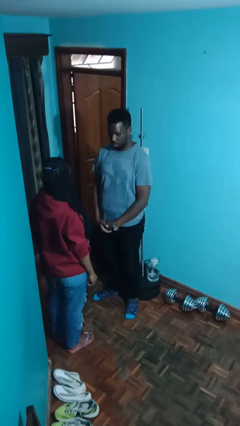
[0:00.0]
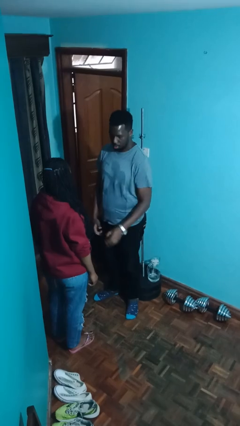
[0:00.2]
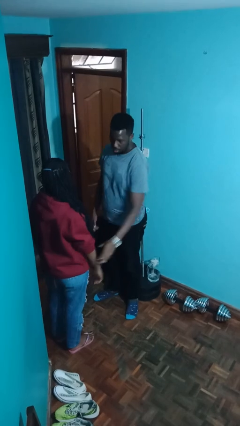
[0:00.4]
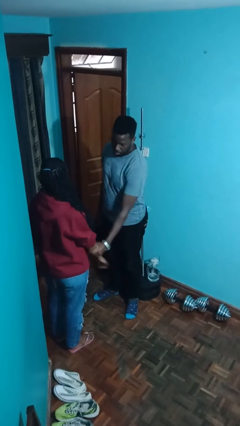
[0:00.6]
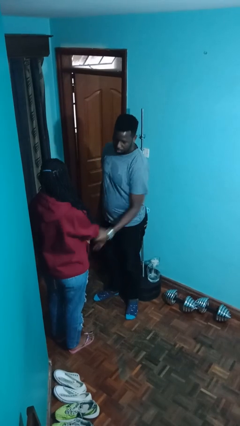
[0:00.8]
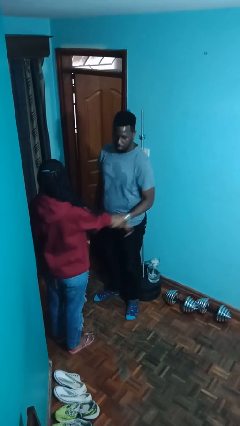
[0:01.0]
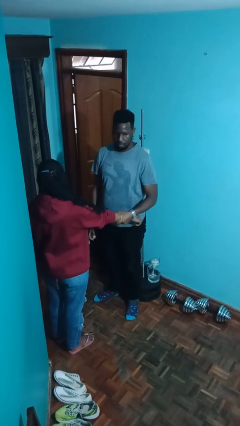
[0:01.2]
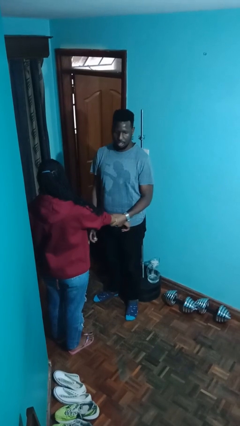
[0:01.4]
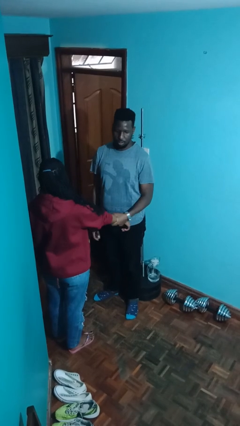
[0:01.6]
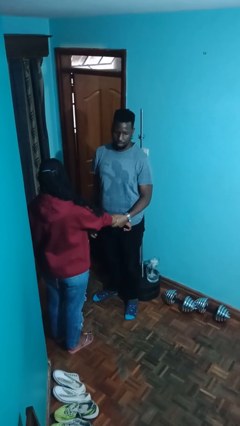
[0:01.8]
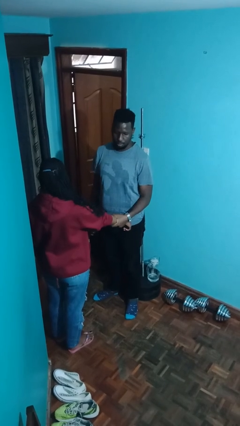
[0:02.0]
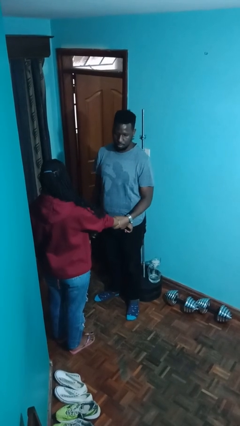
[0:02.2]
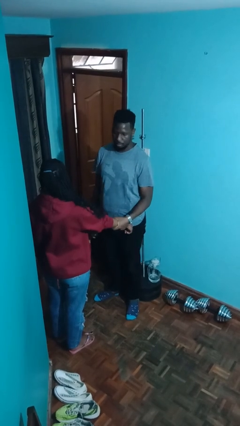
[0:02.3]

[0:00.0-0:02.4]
person grabs person by forearm

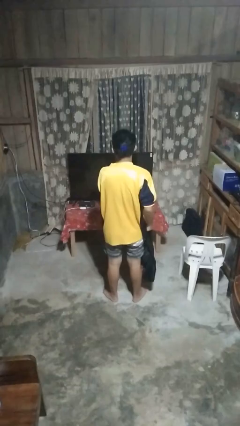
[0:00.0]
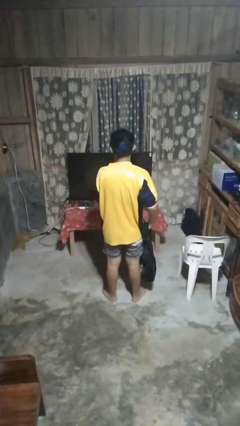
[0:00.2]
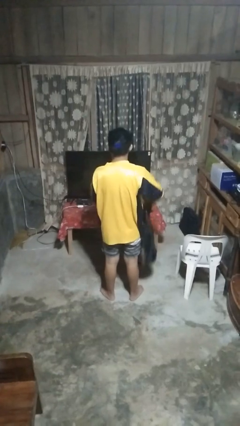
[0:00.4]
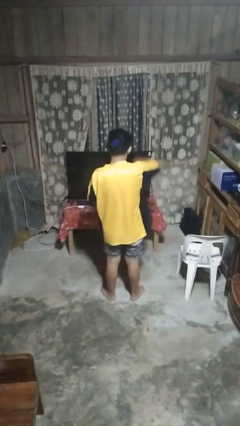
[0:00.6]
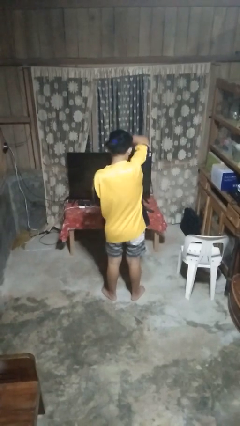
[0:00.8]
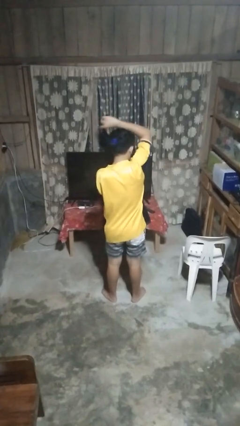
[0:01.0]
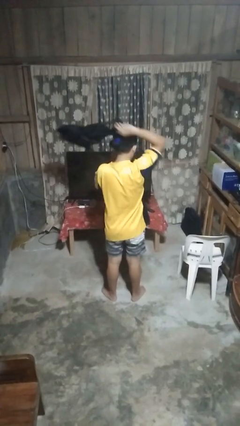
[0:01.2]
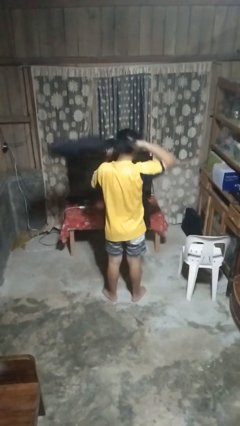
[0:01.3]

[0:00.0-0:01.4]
person puts on backpack

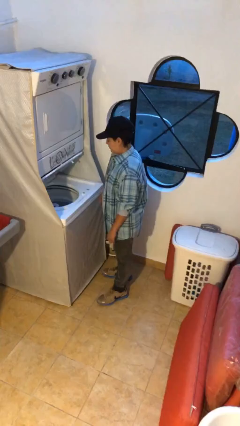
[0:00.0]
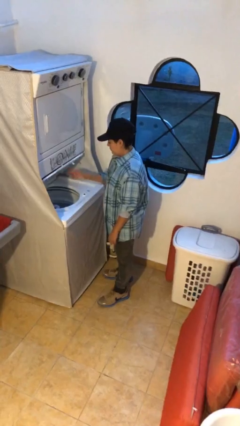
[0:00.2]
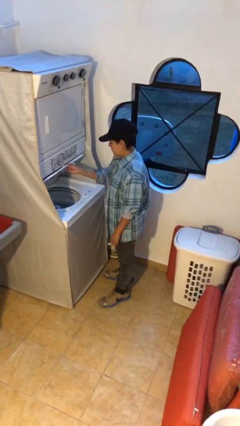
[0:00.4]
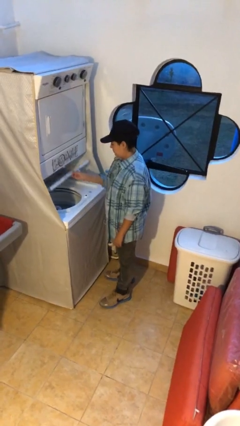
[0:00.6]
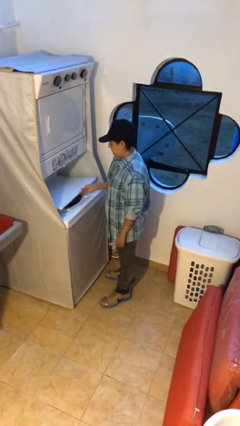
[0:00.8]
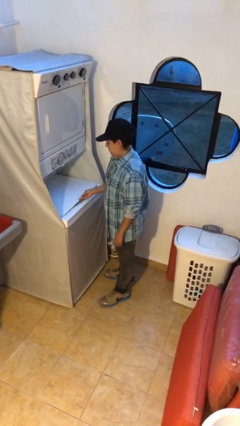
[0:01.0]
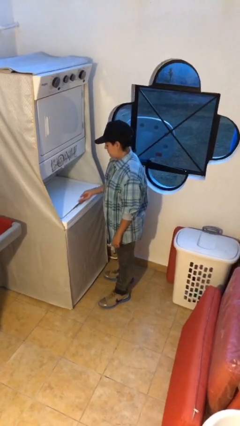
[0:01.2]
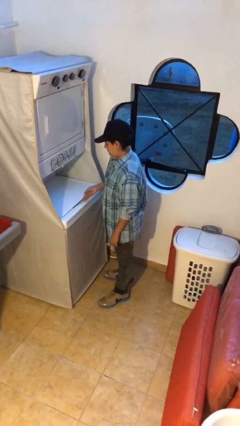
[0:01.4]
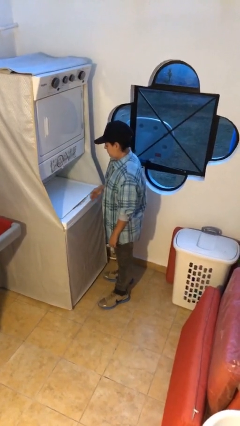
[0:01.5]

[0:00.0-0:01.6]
person closes clothes washer

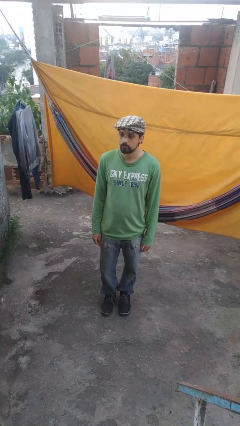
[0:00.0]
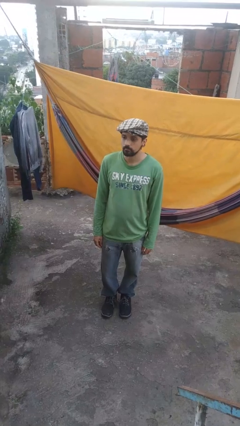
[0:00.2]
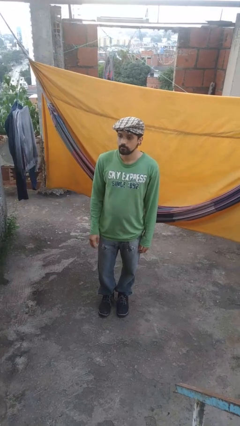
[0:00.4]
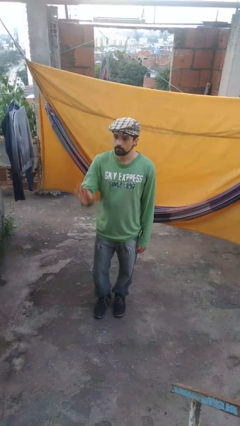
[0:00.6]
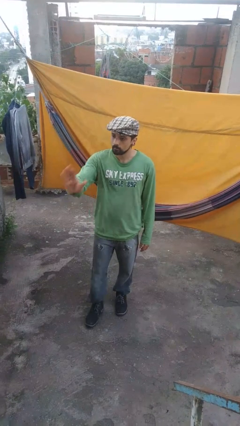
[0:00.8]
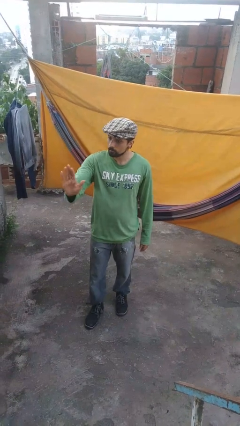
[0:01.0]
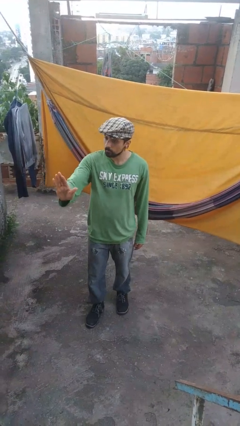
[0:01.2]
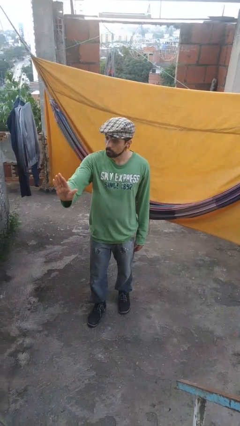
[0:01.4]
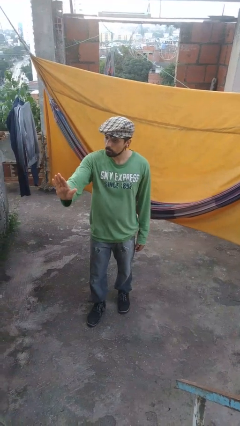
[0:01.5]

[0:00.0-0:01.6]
person gestures stop

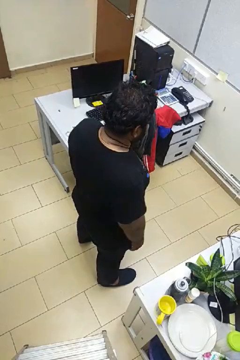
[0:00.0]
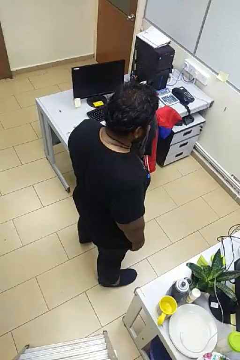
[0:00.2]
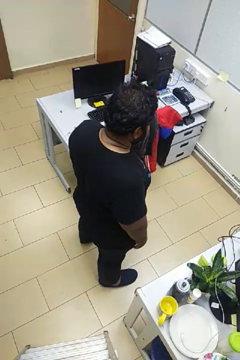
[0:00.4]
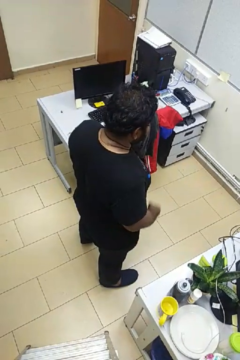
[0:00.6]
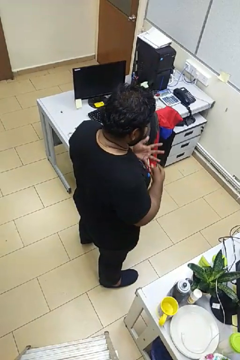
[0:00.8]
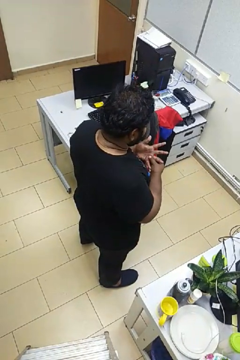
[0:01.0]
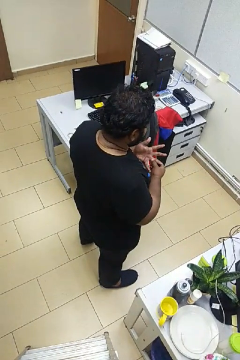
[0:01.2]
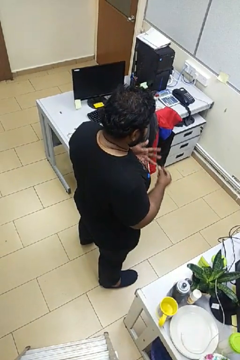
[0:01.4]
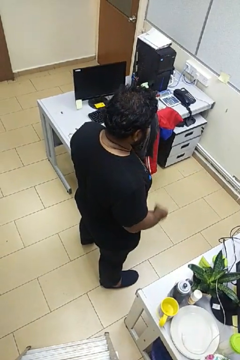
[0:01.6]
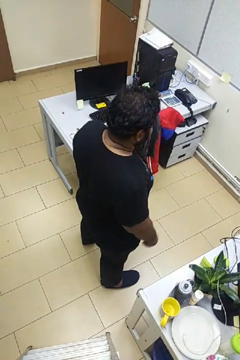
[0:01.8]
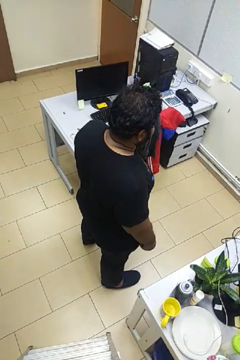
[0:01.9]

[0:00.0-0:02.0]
person takes off ring

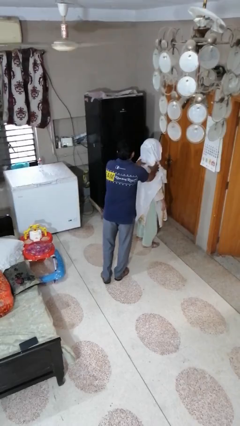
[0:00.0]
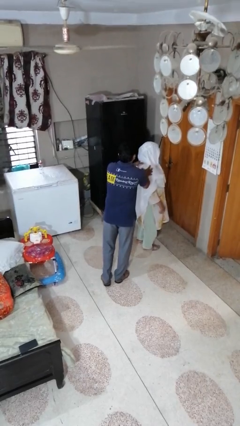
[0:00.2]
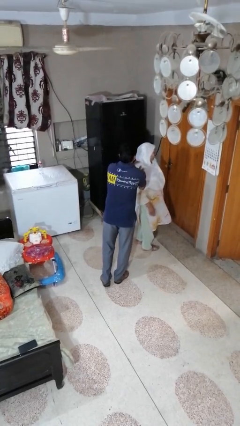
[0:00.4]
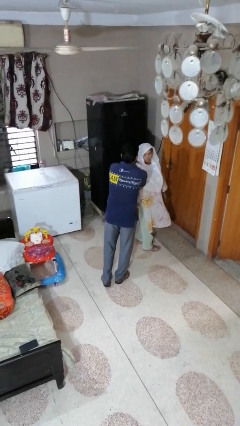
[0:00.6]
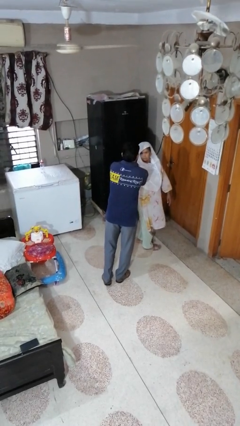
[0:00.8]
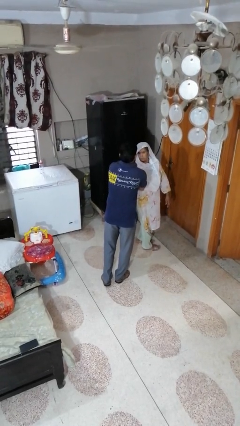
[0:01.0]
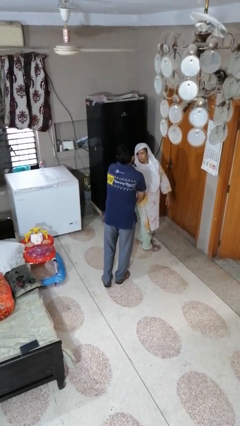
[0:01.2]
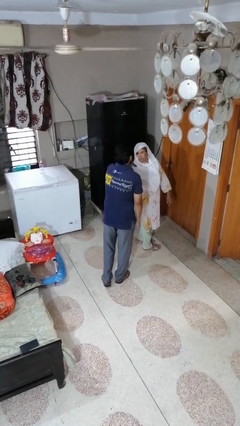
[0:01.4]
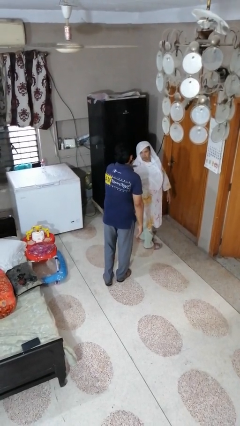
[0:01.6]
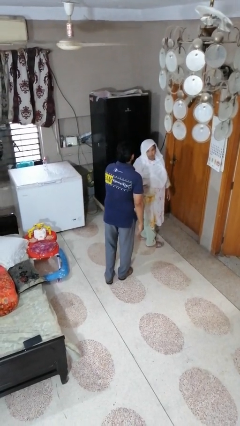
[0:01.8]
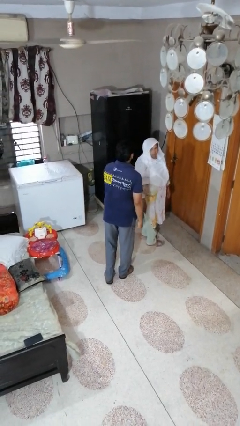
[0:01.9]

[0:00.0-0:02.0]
person spins person around

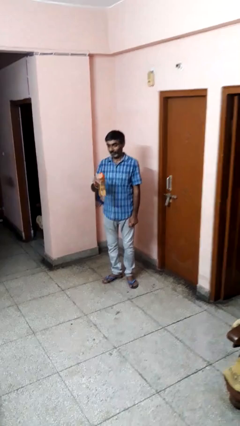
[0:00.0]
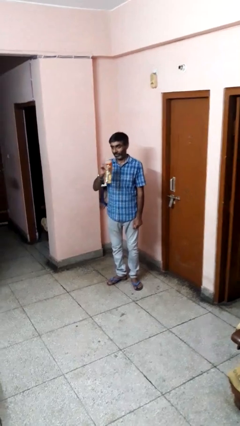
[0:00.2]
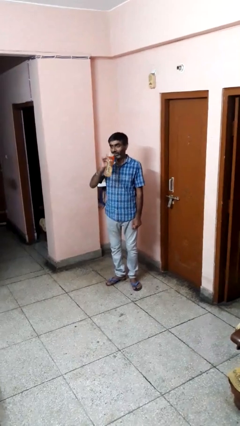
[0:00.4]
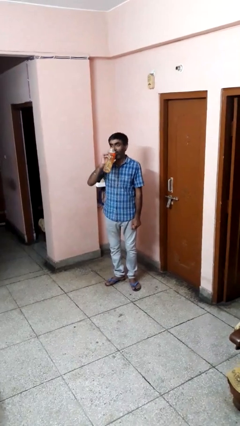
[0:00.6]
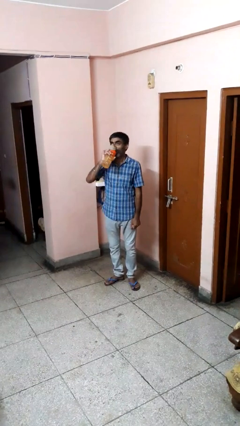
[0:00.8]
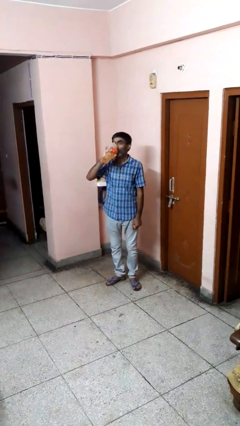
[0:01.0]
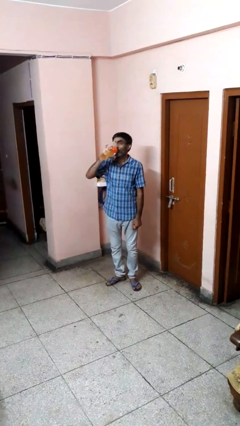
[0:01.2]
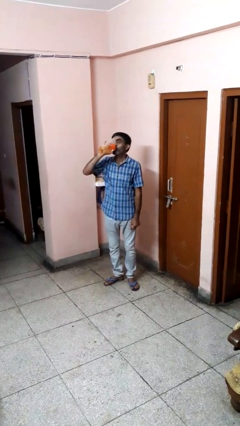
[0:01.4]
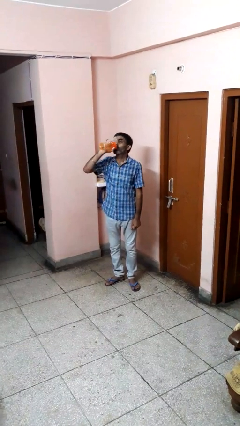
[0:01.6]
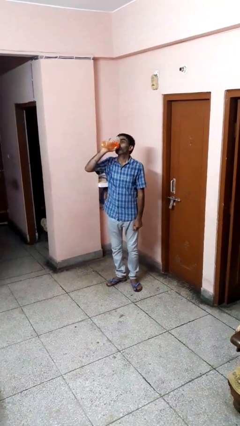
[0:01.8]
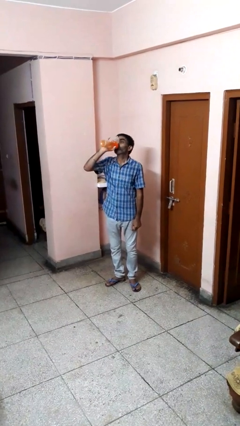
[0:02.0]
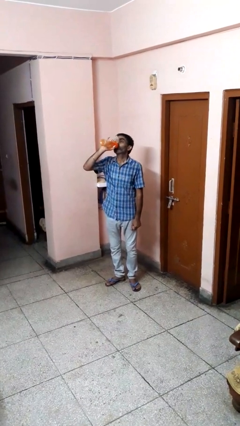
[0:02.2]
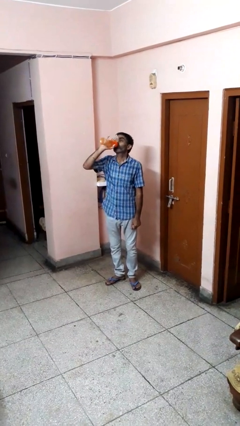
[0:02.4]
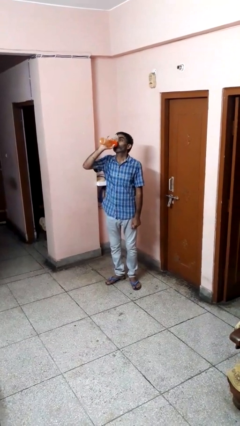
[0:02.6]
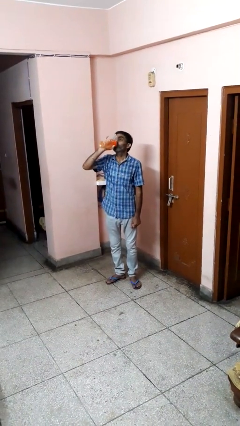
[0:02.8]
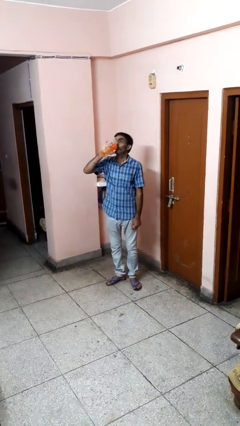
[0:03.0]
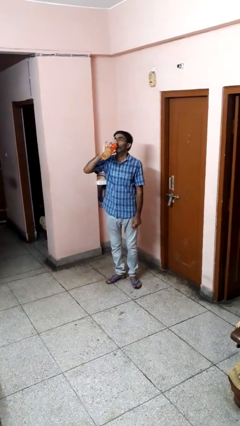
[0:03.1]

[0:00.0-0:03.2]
person drinks from bottle

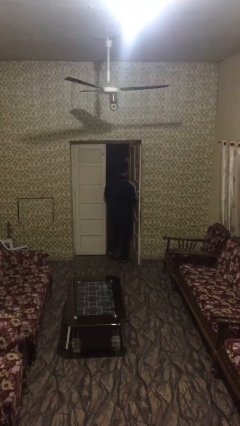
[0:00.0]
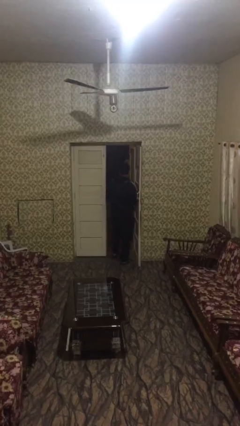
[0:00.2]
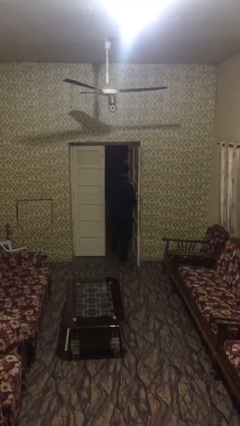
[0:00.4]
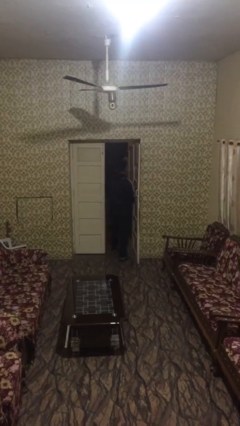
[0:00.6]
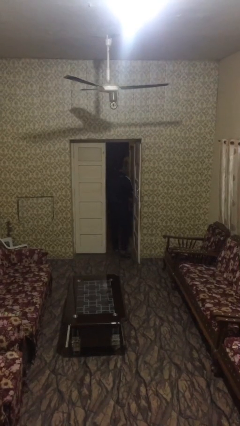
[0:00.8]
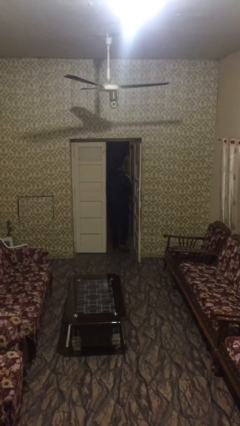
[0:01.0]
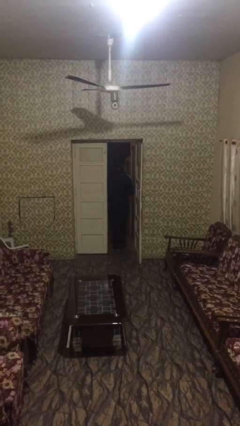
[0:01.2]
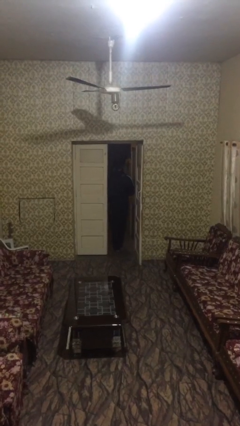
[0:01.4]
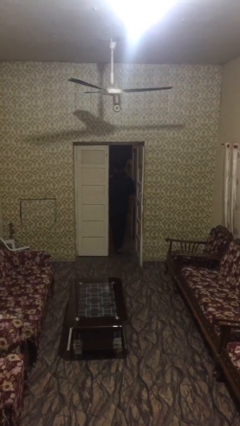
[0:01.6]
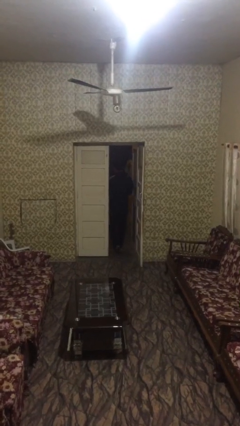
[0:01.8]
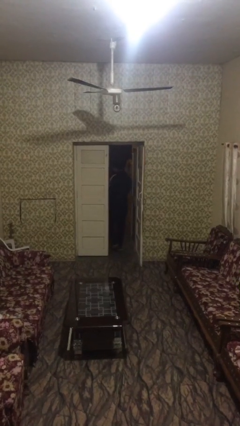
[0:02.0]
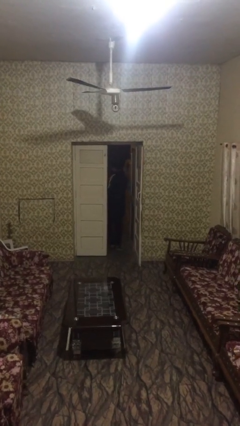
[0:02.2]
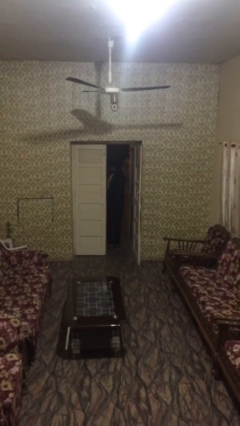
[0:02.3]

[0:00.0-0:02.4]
person exits scene through structure

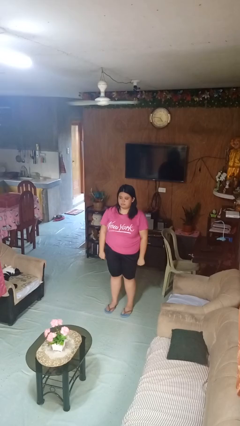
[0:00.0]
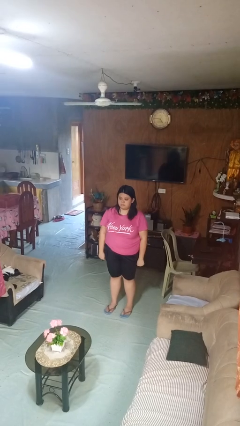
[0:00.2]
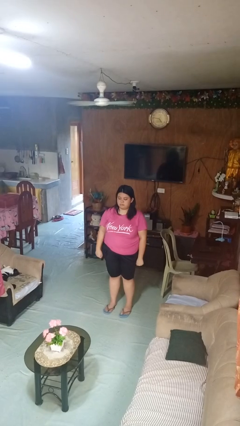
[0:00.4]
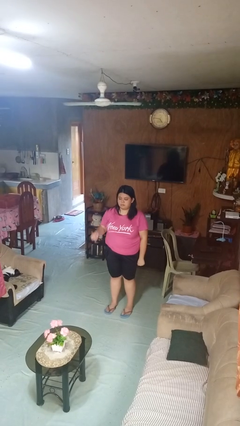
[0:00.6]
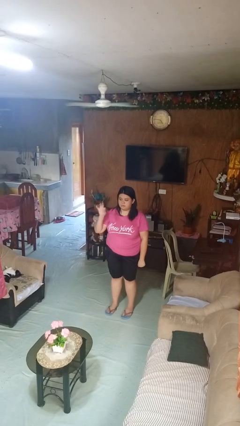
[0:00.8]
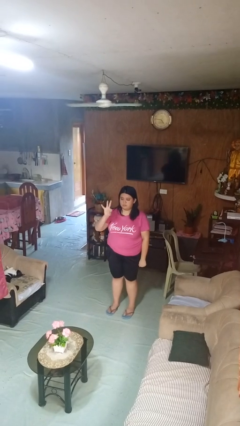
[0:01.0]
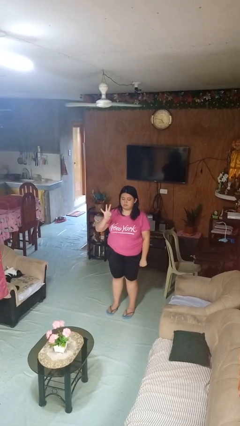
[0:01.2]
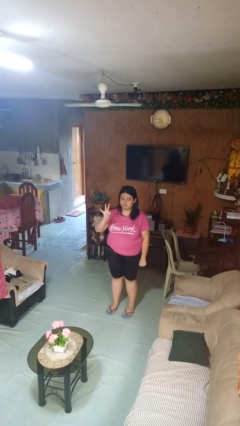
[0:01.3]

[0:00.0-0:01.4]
person gestures number three
